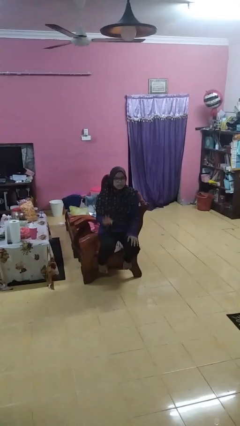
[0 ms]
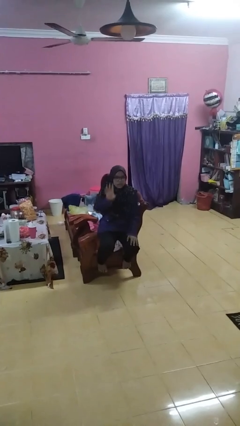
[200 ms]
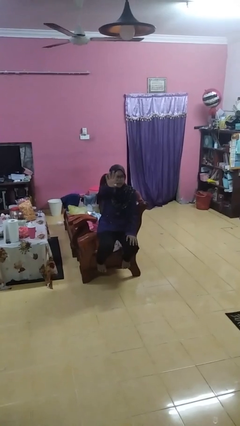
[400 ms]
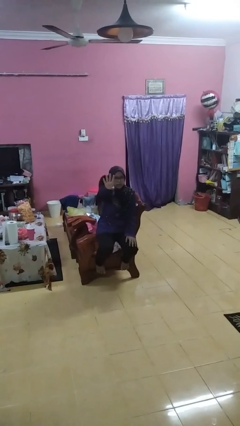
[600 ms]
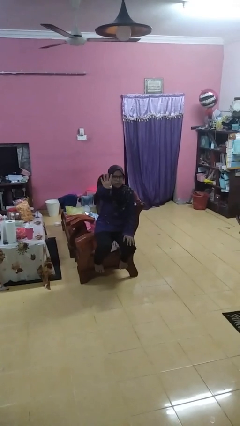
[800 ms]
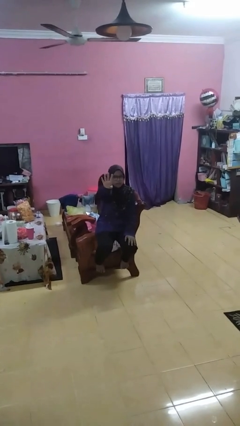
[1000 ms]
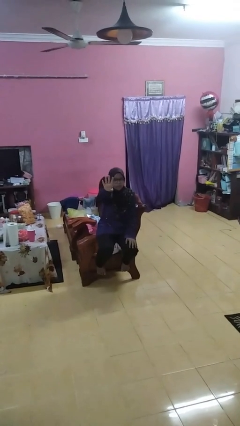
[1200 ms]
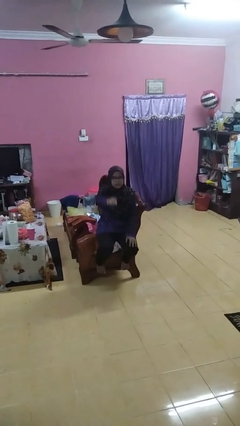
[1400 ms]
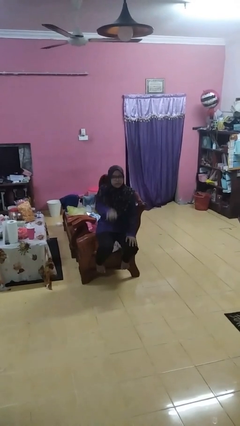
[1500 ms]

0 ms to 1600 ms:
person gestures number four

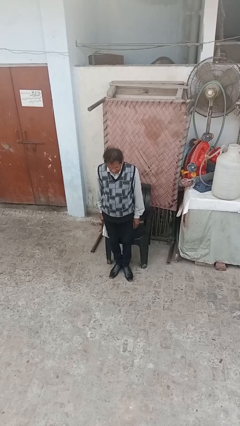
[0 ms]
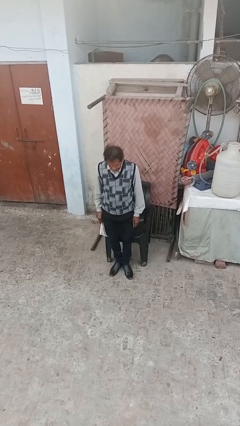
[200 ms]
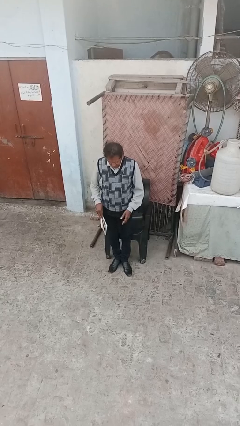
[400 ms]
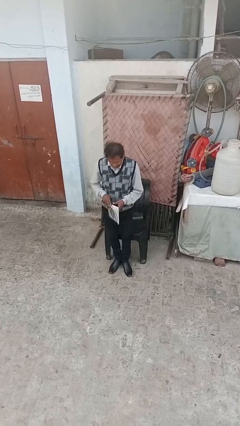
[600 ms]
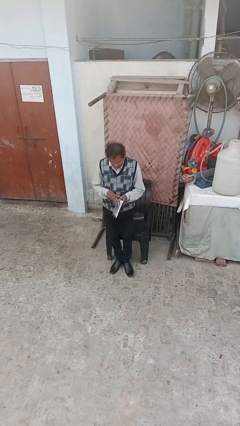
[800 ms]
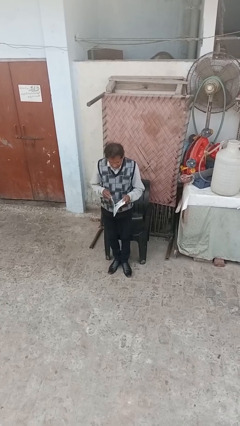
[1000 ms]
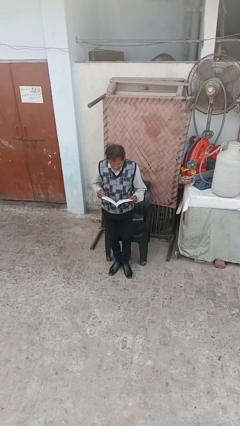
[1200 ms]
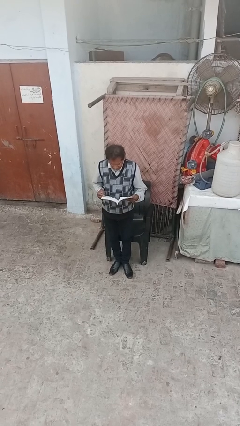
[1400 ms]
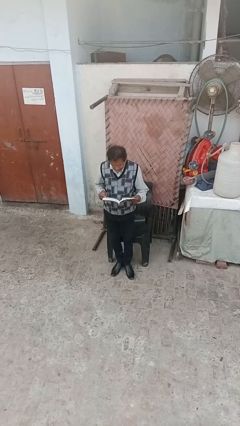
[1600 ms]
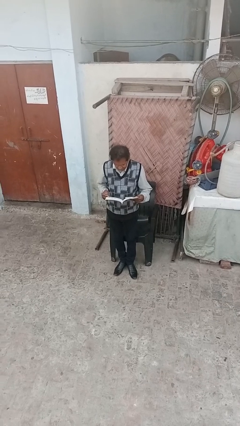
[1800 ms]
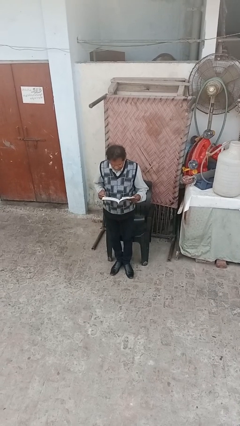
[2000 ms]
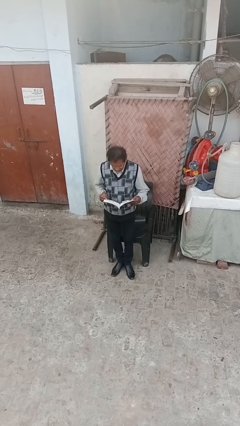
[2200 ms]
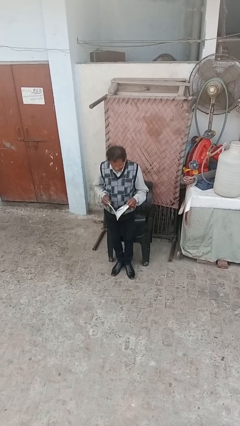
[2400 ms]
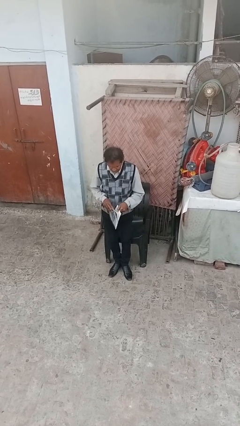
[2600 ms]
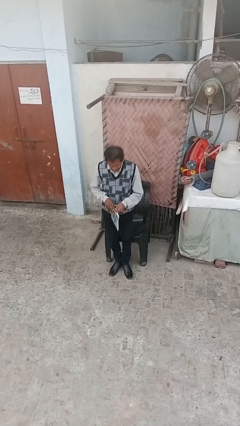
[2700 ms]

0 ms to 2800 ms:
person reads document

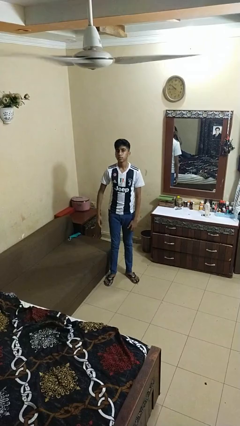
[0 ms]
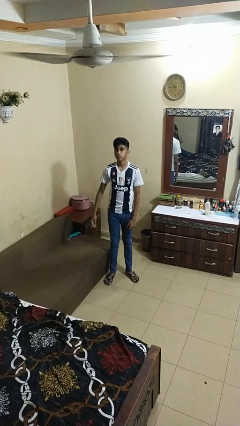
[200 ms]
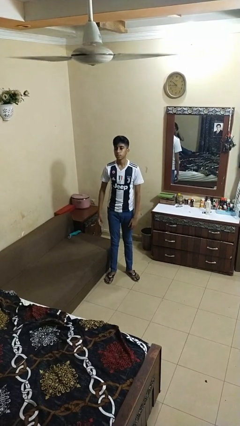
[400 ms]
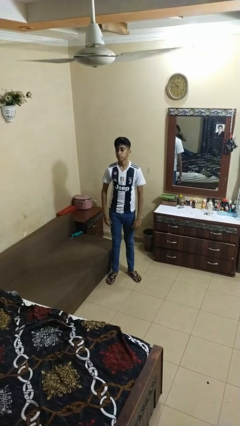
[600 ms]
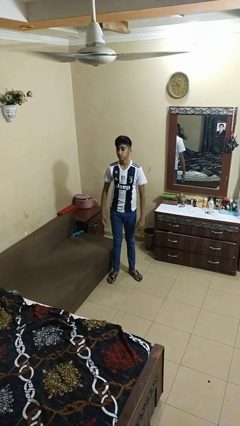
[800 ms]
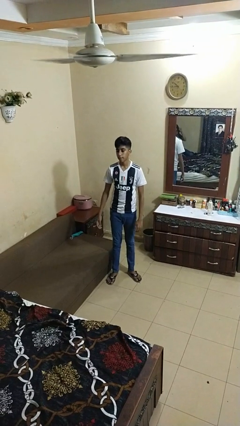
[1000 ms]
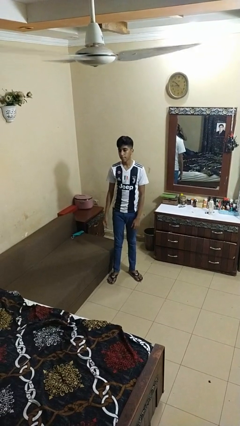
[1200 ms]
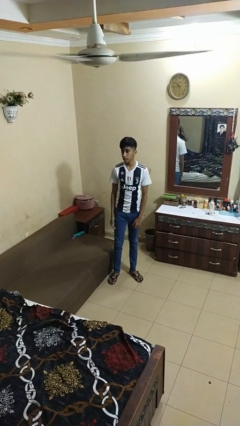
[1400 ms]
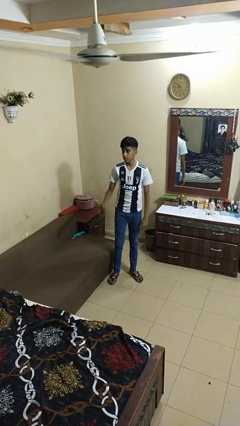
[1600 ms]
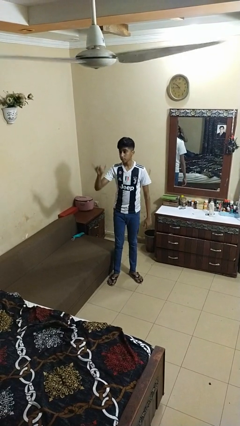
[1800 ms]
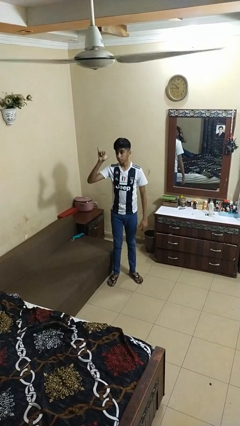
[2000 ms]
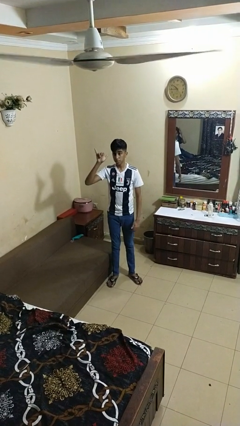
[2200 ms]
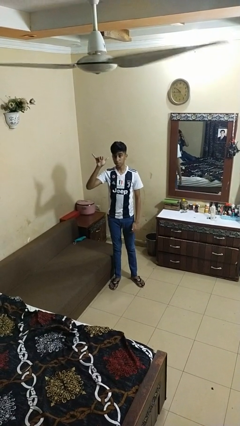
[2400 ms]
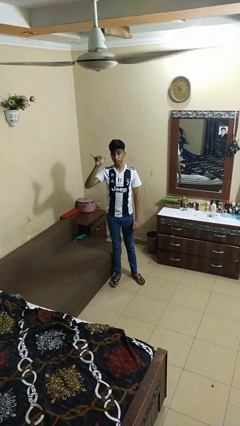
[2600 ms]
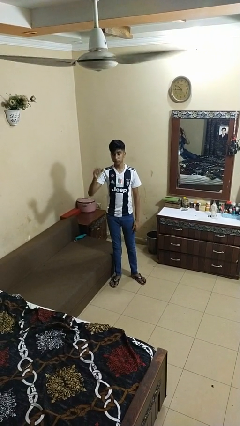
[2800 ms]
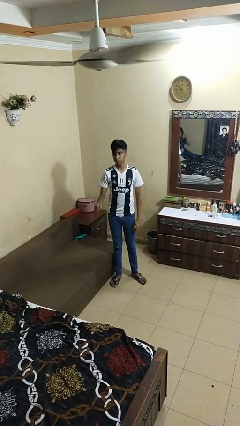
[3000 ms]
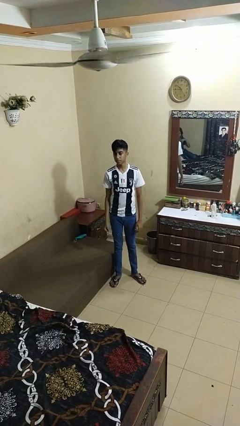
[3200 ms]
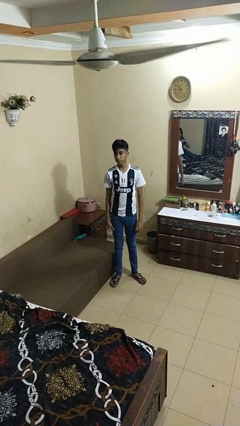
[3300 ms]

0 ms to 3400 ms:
person gestures hang loose

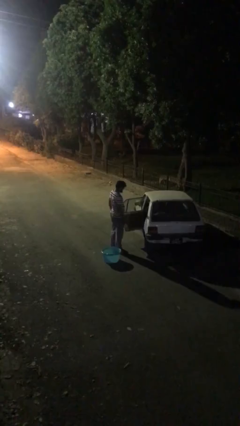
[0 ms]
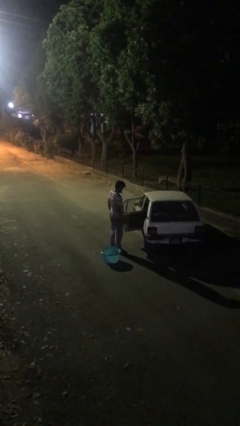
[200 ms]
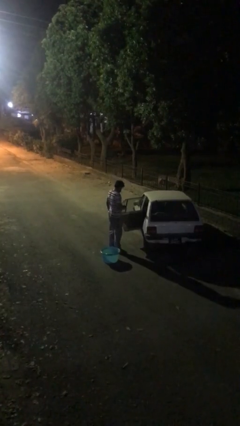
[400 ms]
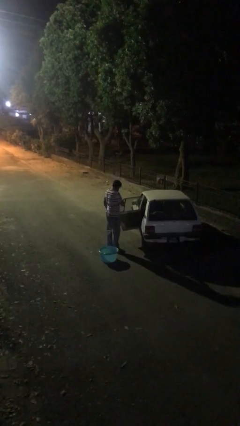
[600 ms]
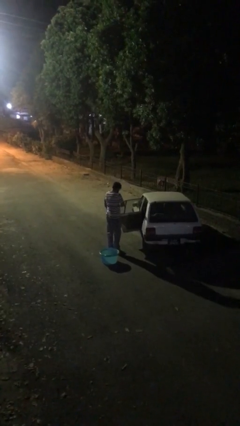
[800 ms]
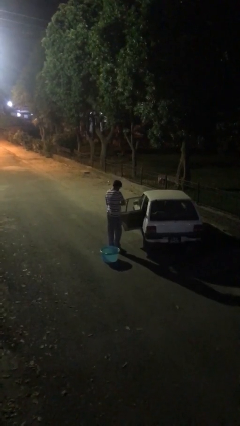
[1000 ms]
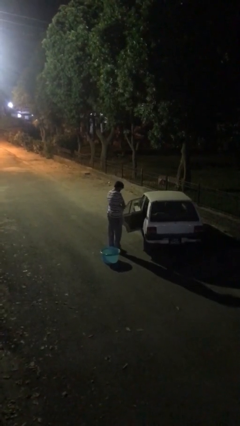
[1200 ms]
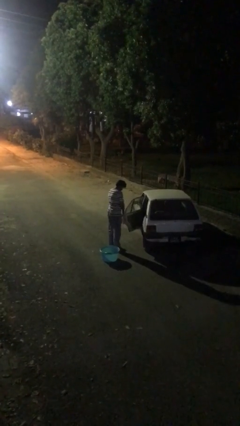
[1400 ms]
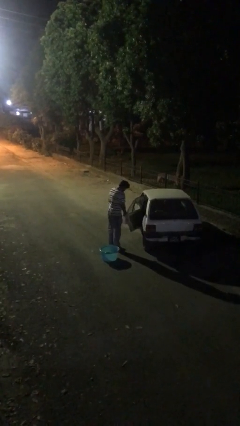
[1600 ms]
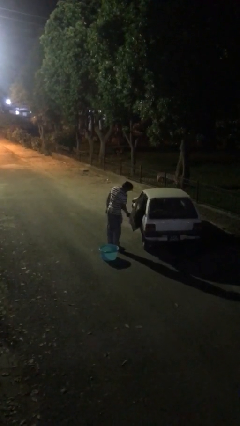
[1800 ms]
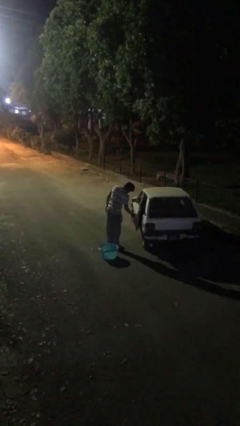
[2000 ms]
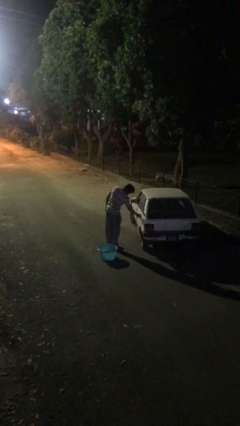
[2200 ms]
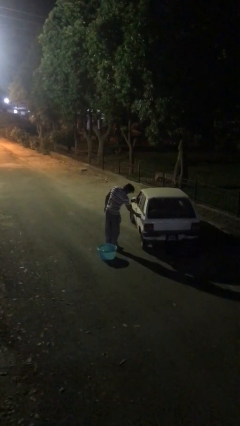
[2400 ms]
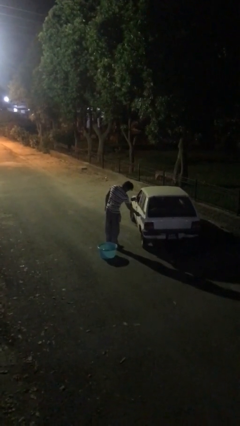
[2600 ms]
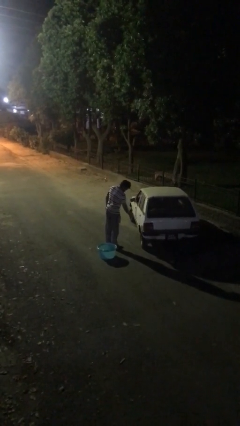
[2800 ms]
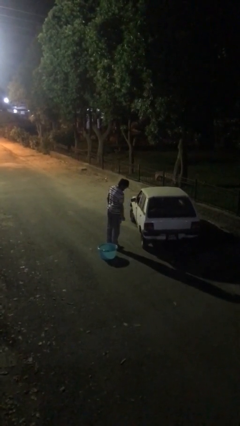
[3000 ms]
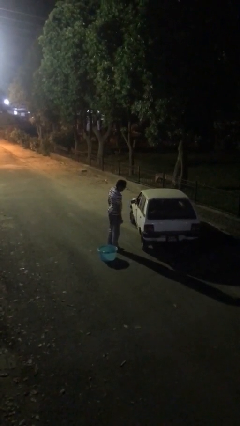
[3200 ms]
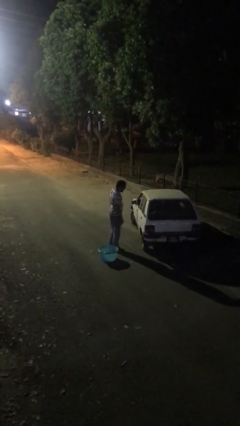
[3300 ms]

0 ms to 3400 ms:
person closes car door

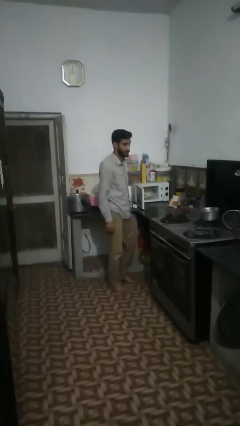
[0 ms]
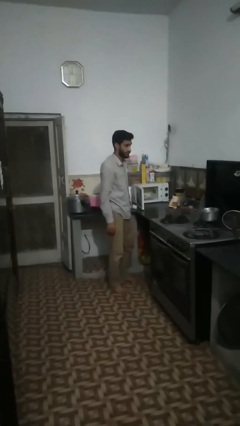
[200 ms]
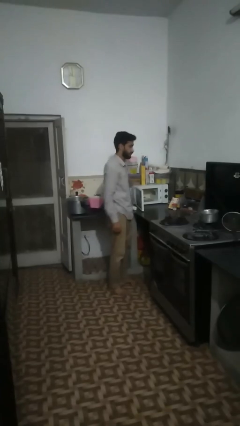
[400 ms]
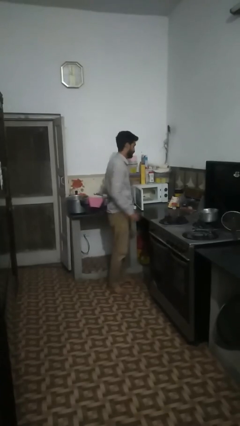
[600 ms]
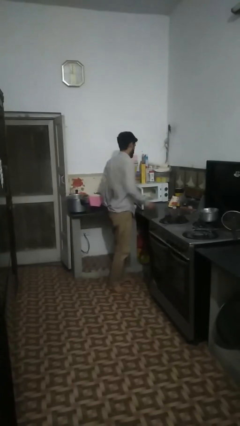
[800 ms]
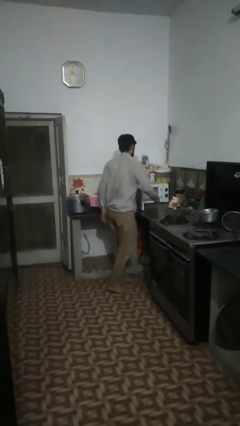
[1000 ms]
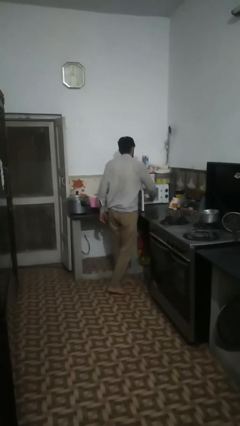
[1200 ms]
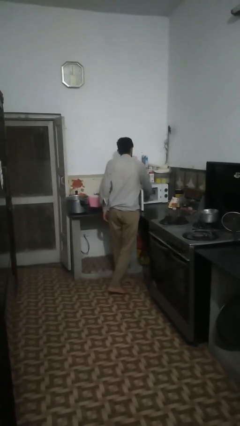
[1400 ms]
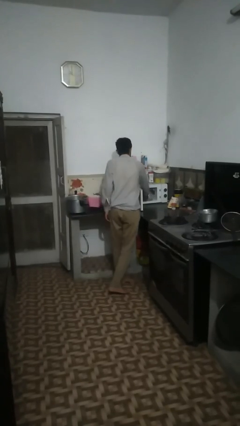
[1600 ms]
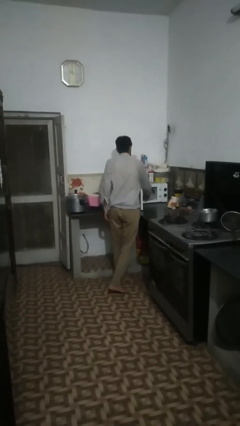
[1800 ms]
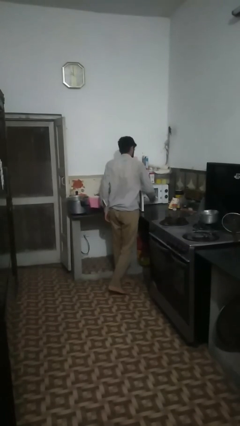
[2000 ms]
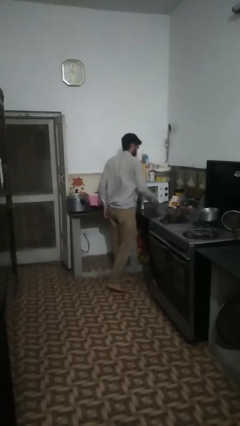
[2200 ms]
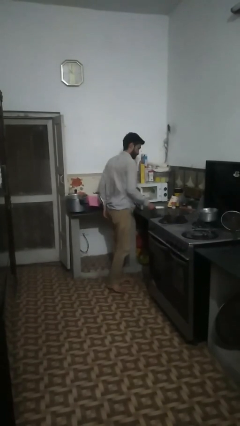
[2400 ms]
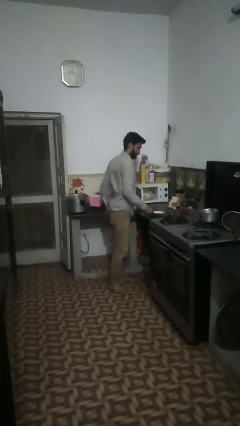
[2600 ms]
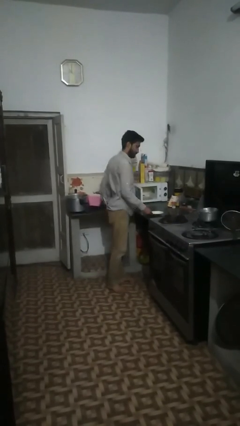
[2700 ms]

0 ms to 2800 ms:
person takes object from microwave

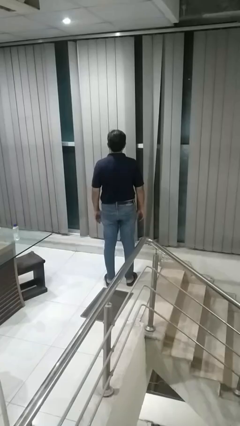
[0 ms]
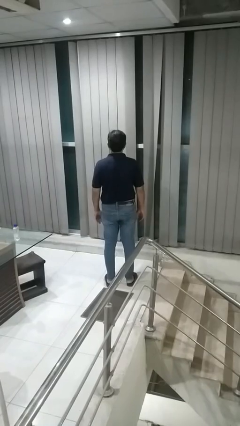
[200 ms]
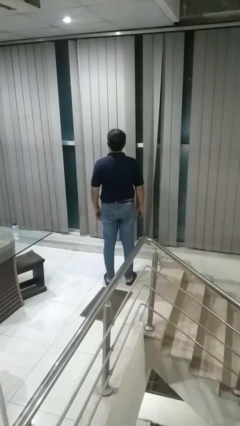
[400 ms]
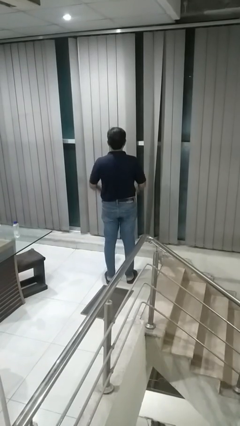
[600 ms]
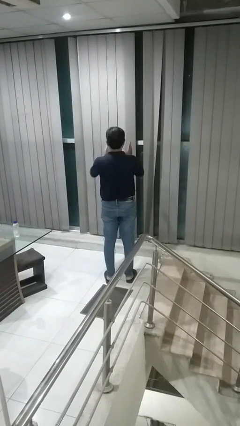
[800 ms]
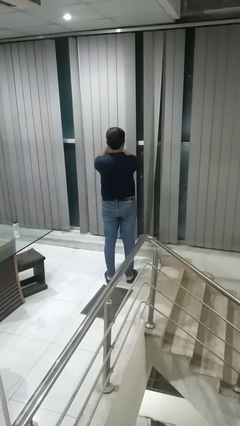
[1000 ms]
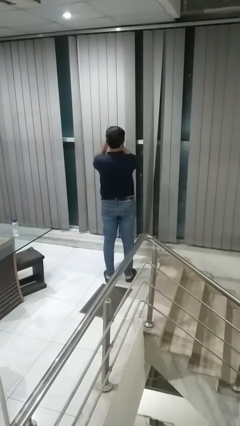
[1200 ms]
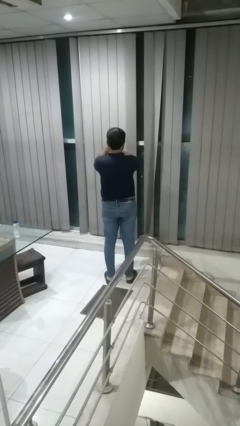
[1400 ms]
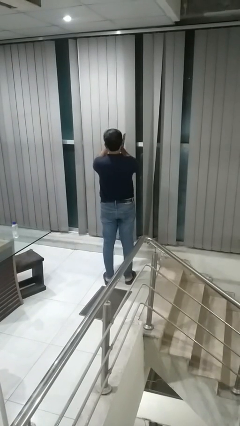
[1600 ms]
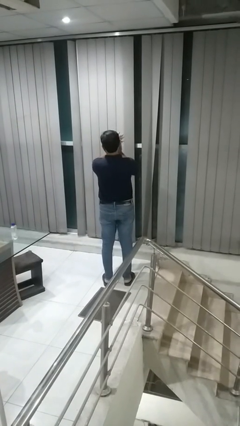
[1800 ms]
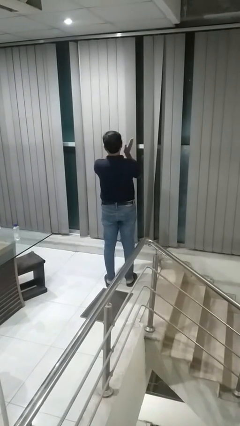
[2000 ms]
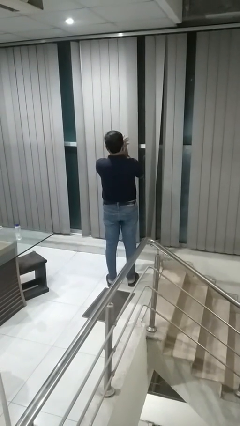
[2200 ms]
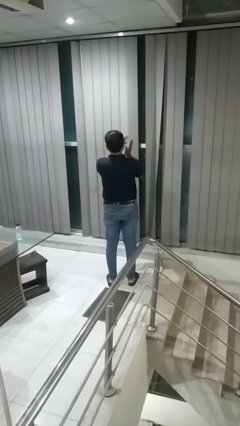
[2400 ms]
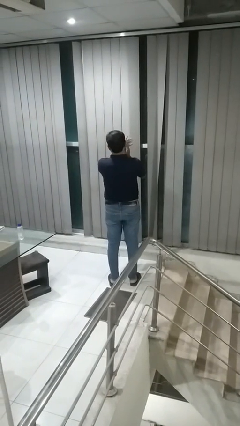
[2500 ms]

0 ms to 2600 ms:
person claps hands

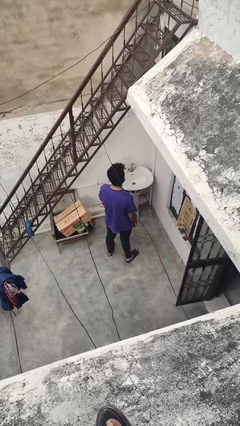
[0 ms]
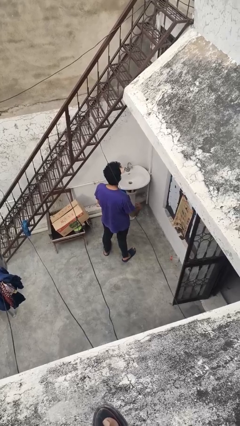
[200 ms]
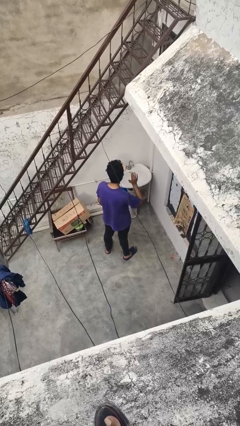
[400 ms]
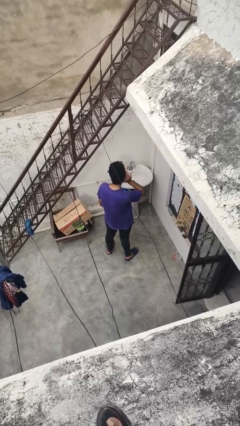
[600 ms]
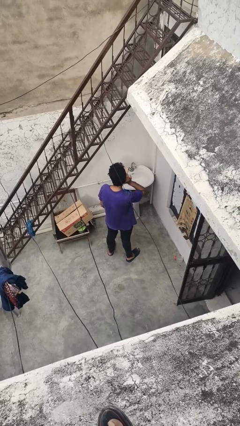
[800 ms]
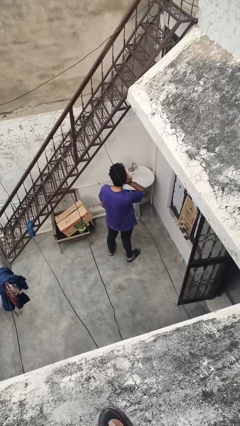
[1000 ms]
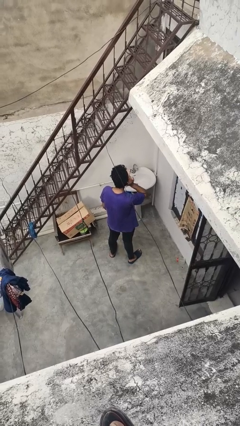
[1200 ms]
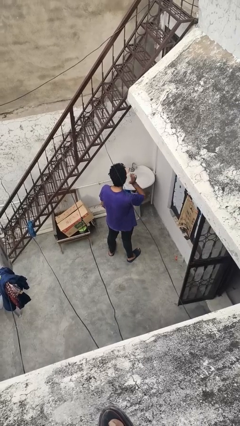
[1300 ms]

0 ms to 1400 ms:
person gestures listen closely
